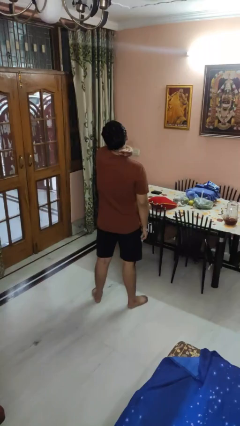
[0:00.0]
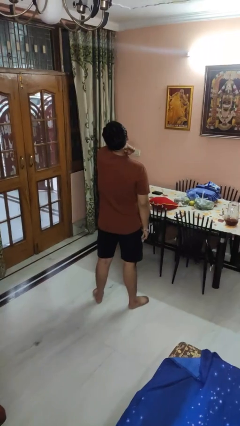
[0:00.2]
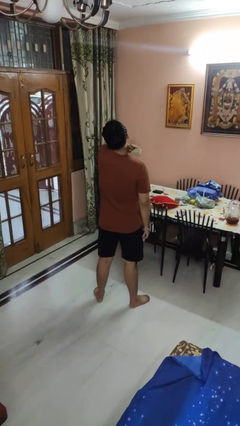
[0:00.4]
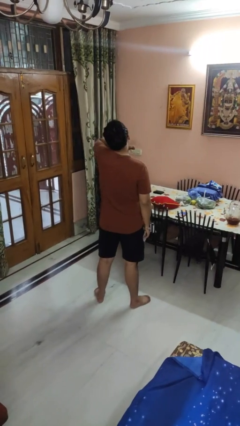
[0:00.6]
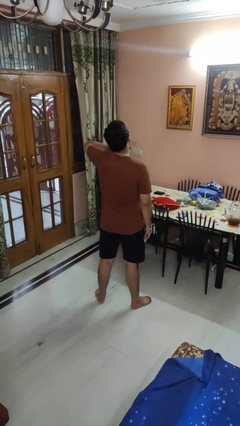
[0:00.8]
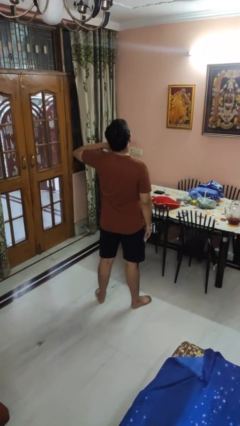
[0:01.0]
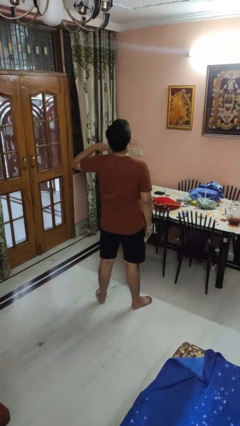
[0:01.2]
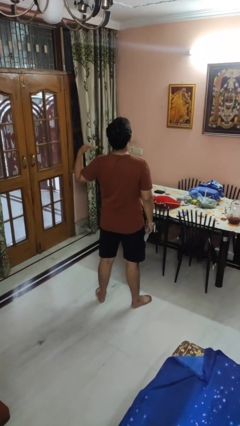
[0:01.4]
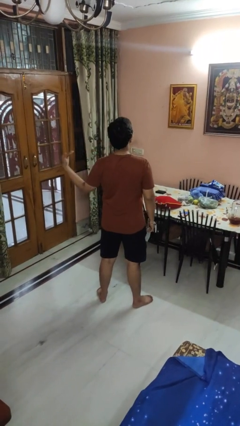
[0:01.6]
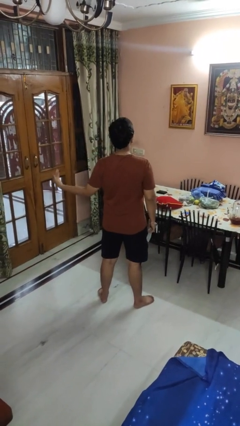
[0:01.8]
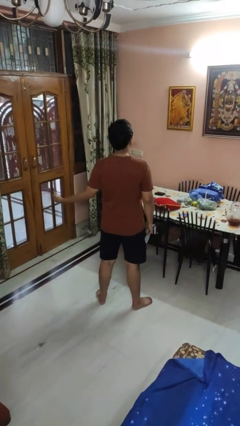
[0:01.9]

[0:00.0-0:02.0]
person gestures cut

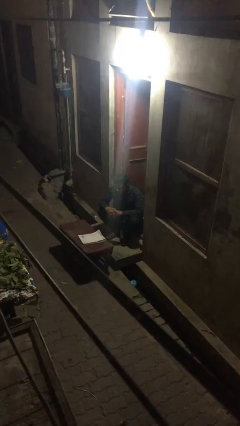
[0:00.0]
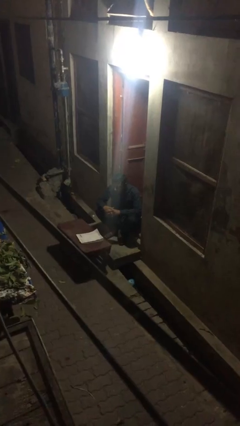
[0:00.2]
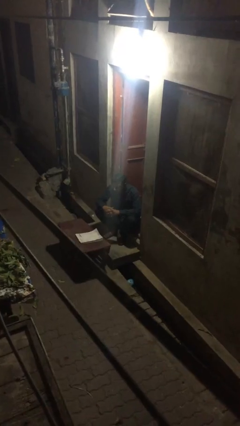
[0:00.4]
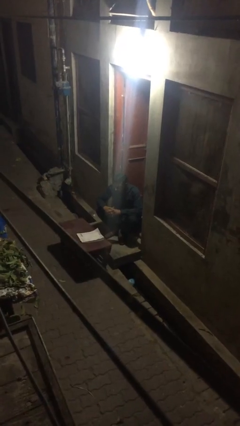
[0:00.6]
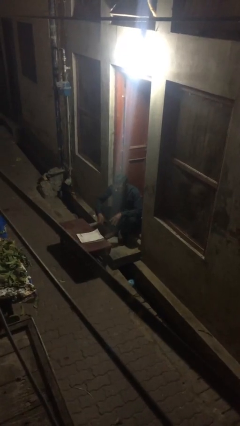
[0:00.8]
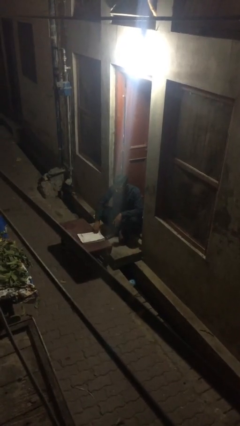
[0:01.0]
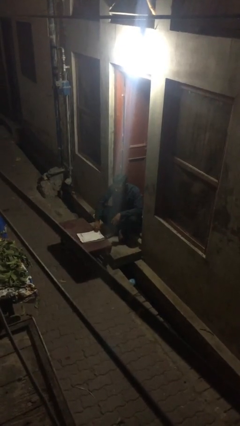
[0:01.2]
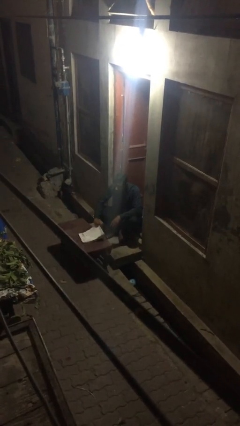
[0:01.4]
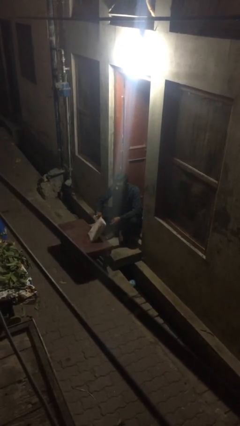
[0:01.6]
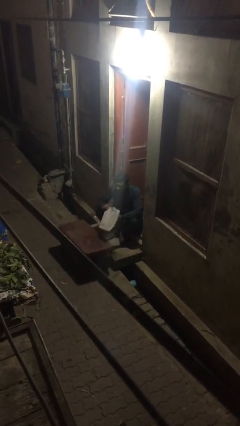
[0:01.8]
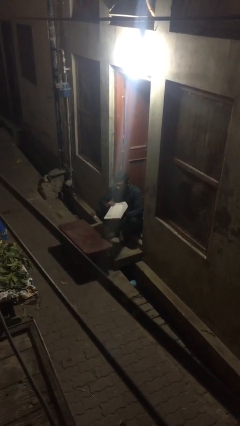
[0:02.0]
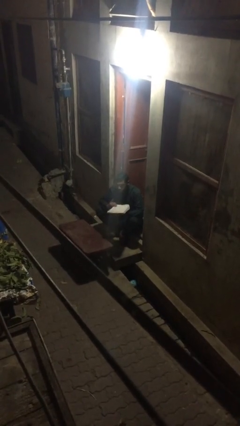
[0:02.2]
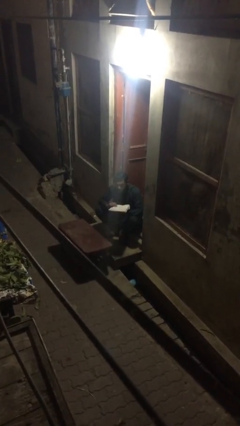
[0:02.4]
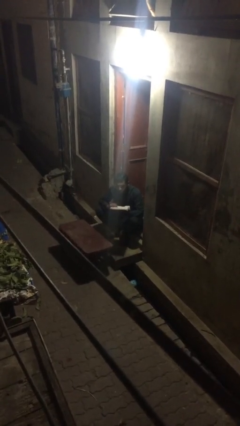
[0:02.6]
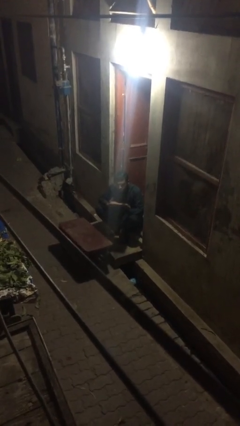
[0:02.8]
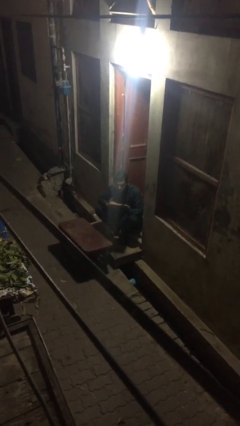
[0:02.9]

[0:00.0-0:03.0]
person picks up object from table

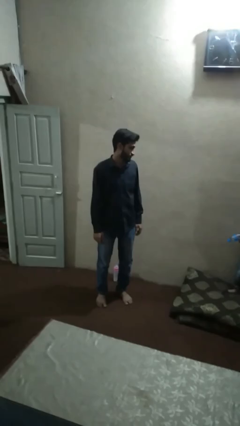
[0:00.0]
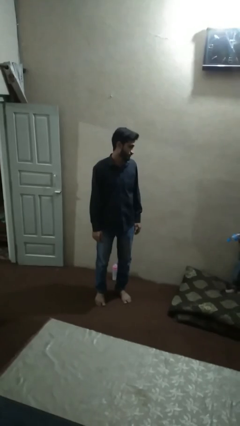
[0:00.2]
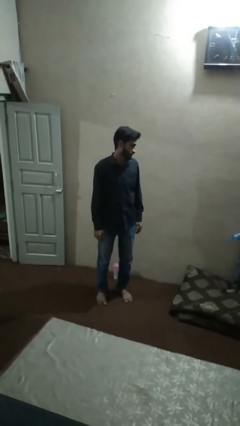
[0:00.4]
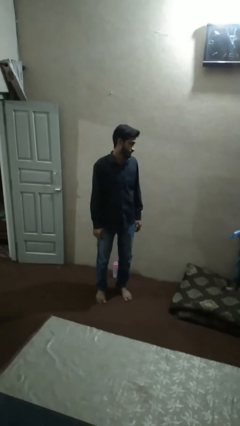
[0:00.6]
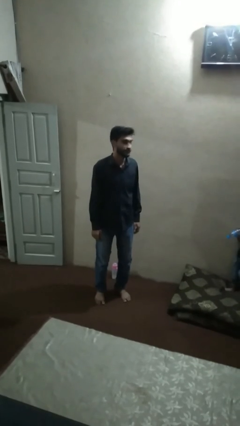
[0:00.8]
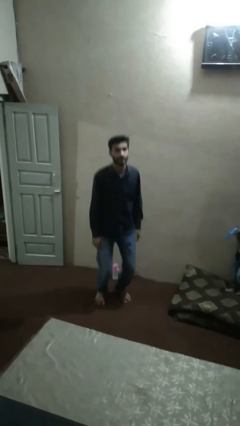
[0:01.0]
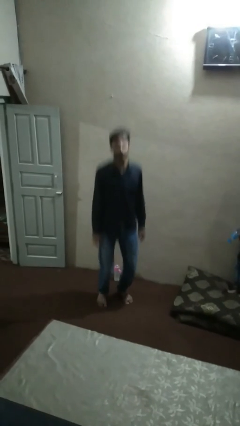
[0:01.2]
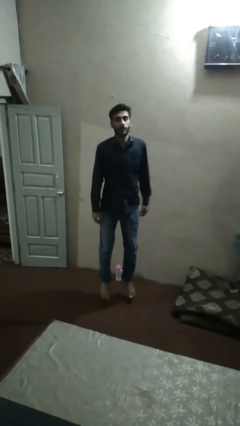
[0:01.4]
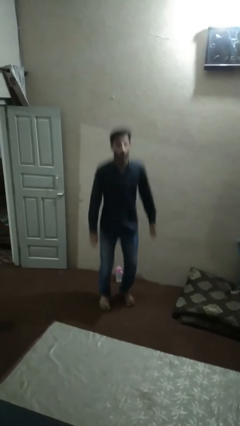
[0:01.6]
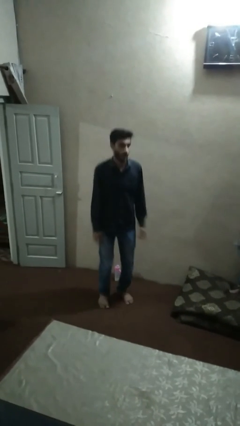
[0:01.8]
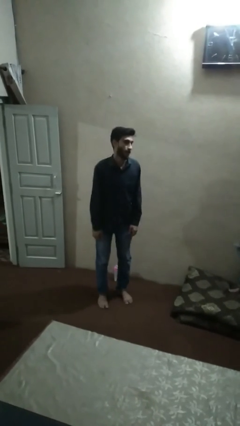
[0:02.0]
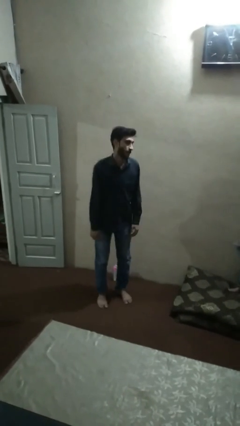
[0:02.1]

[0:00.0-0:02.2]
person jumps

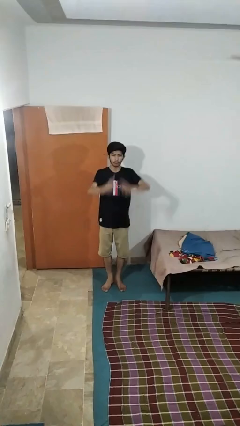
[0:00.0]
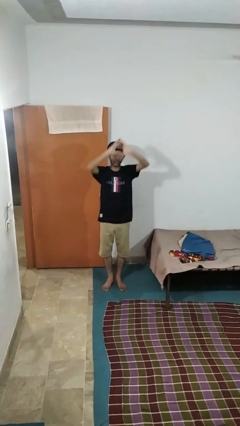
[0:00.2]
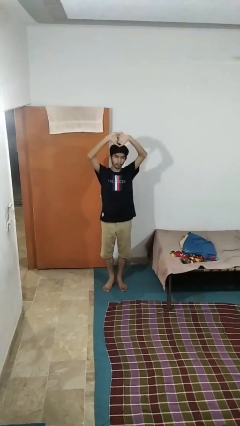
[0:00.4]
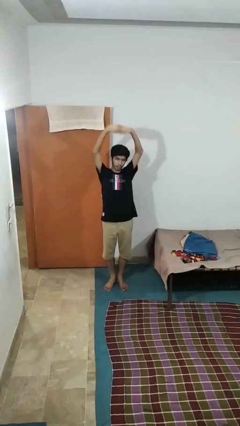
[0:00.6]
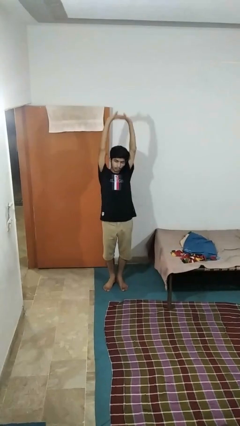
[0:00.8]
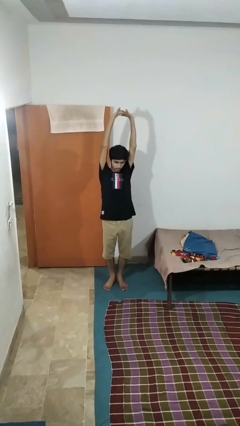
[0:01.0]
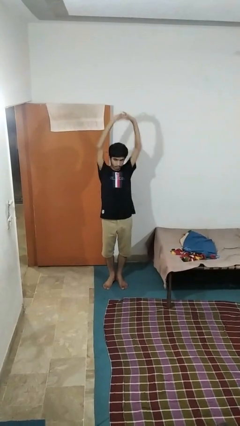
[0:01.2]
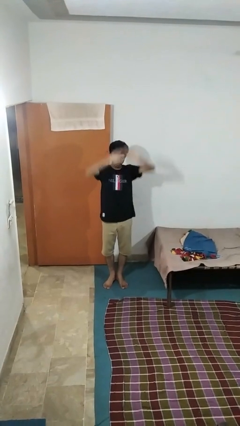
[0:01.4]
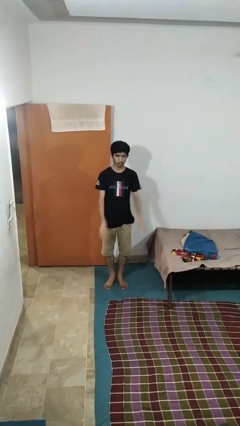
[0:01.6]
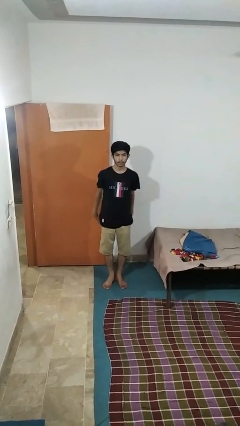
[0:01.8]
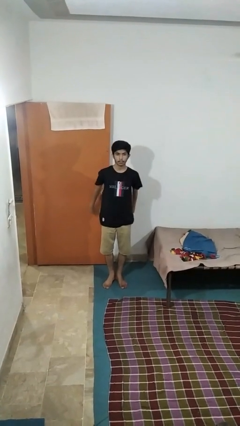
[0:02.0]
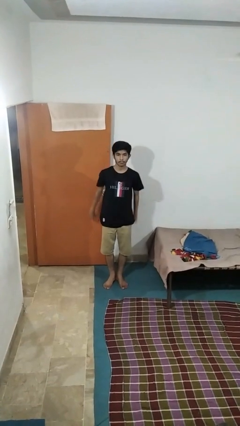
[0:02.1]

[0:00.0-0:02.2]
person stretches arms over head

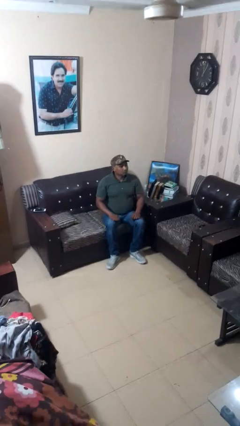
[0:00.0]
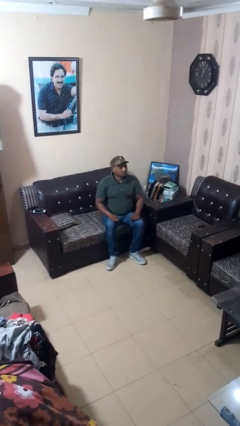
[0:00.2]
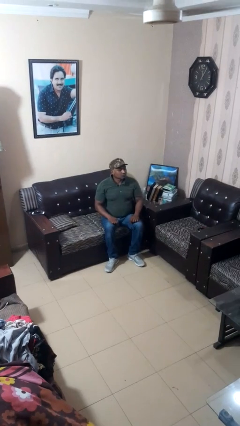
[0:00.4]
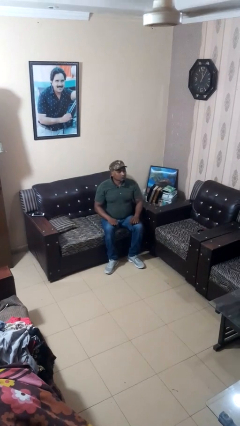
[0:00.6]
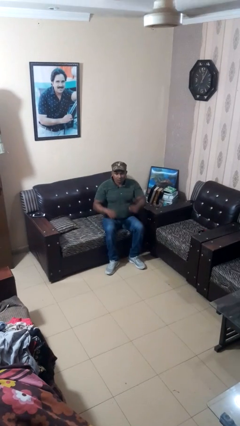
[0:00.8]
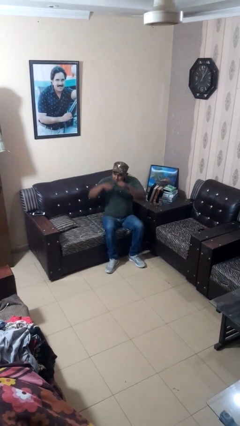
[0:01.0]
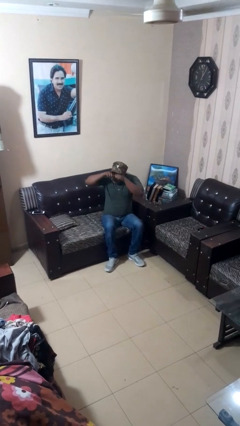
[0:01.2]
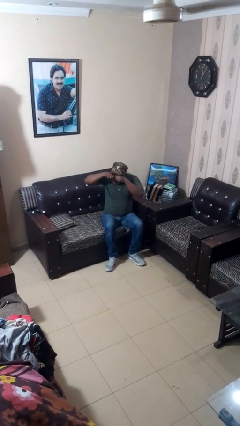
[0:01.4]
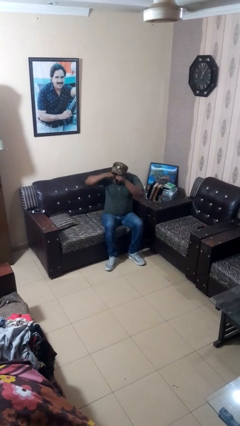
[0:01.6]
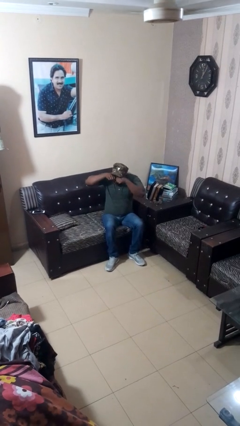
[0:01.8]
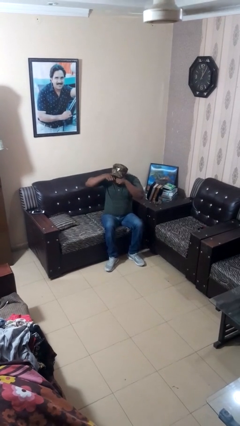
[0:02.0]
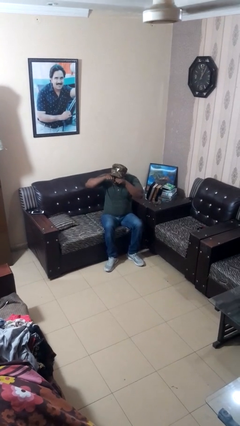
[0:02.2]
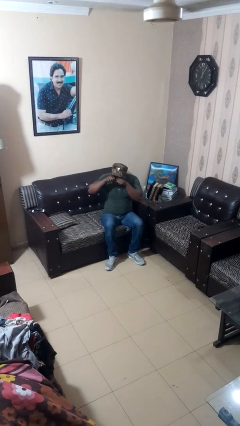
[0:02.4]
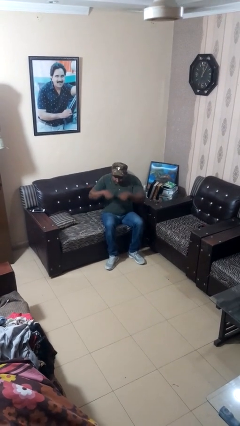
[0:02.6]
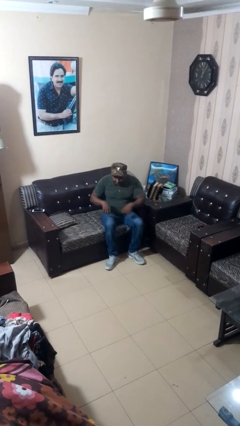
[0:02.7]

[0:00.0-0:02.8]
person rubs eyes

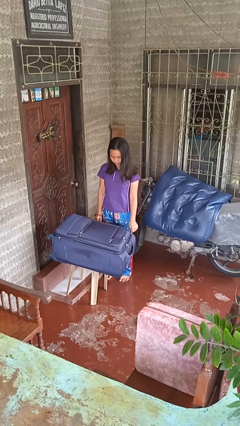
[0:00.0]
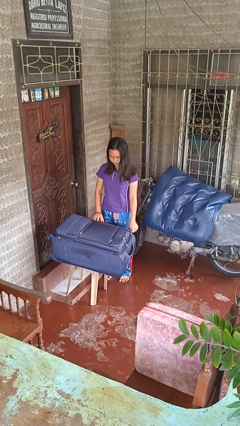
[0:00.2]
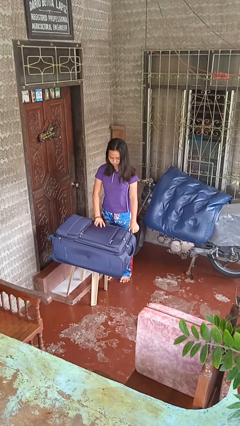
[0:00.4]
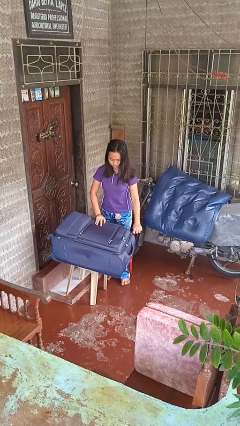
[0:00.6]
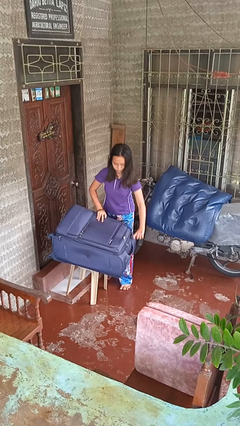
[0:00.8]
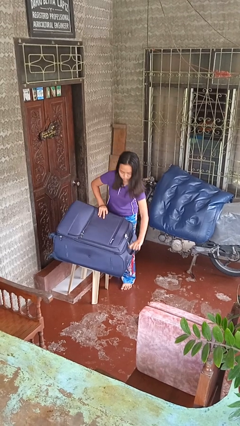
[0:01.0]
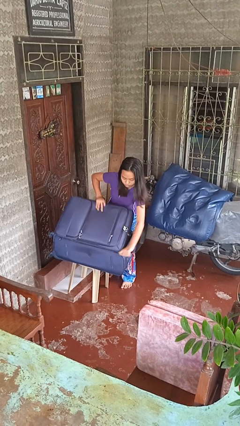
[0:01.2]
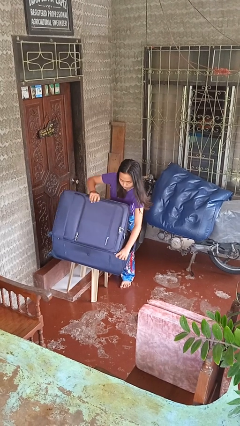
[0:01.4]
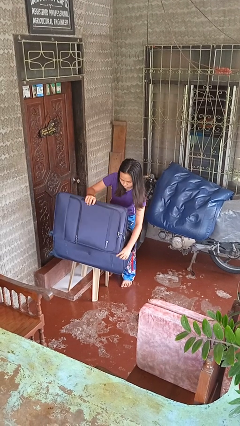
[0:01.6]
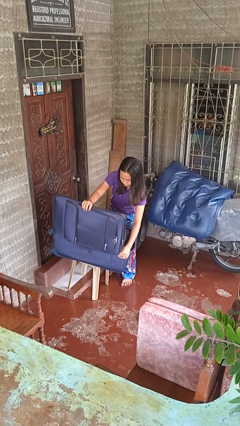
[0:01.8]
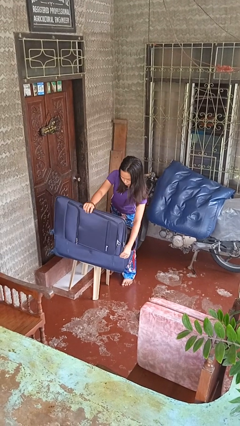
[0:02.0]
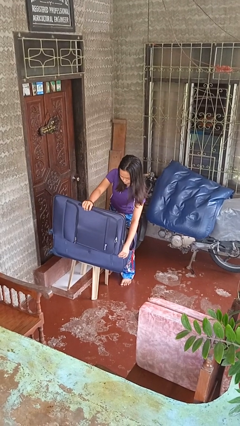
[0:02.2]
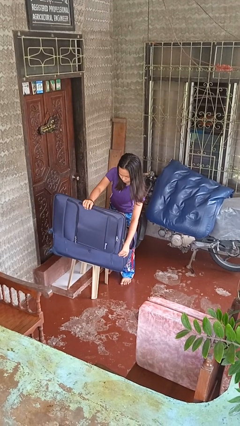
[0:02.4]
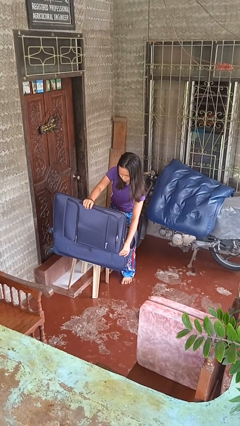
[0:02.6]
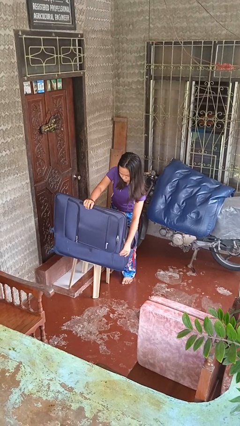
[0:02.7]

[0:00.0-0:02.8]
person opens suitcase

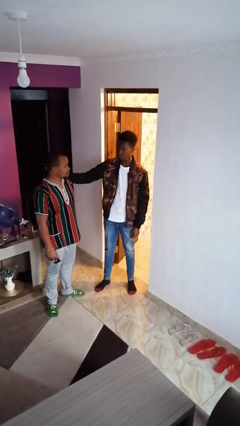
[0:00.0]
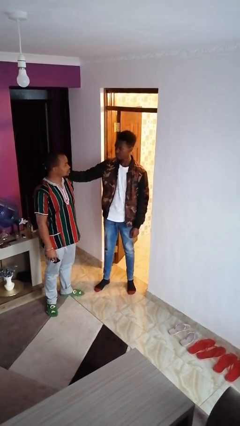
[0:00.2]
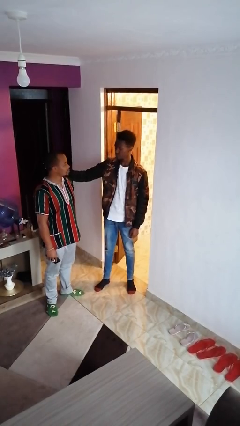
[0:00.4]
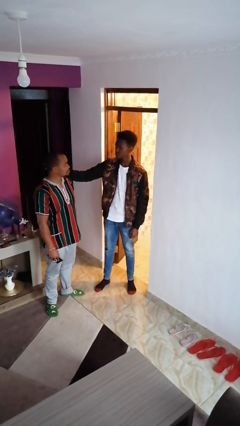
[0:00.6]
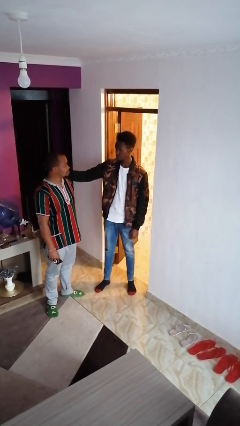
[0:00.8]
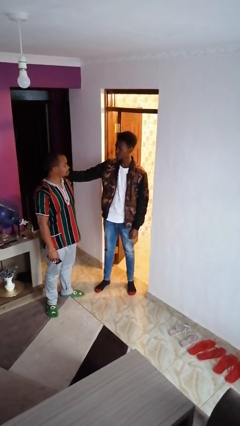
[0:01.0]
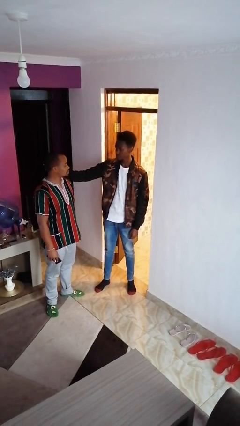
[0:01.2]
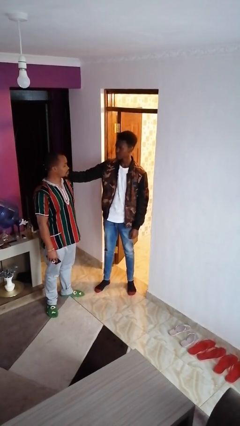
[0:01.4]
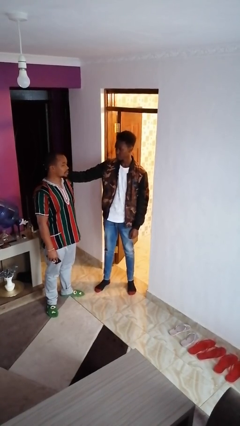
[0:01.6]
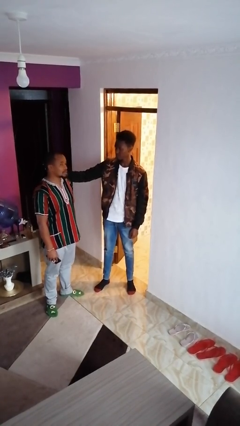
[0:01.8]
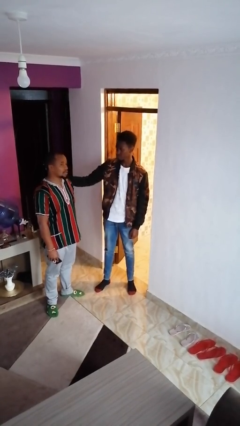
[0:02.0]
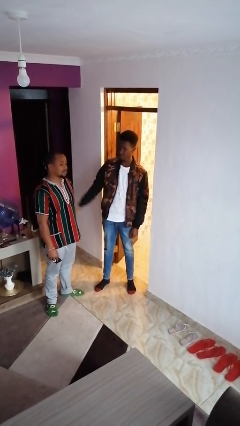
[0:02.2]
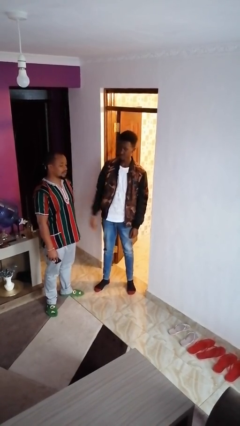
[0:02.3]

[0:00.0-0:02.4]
person pounds shoulders of person
